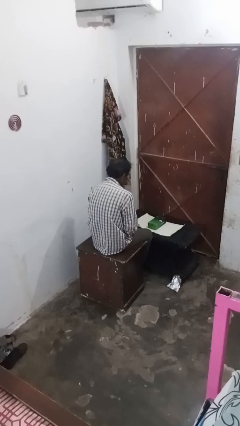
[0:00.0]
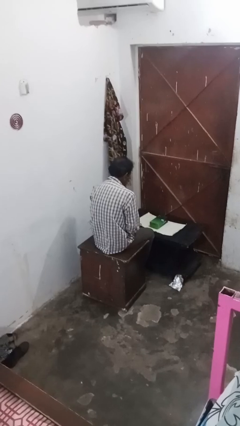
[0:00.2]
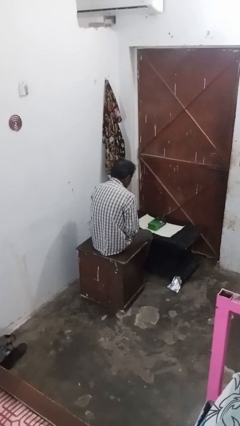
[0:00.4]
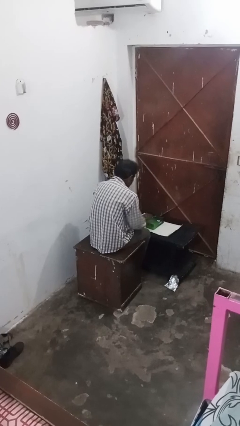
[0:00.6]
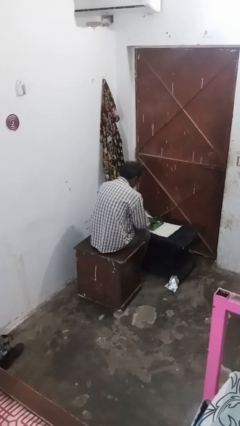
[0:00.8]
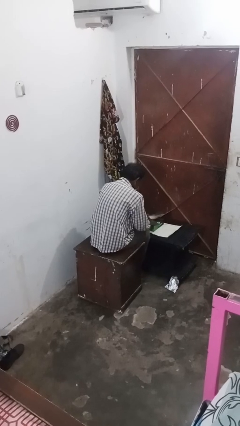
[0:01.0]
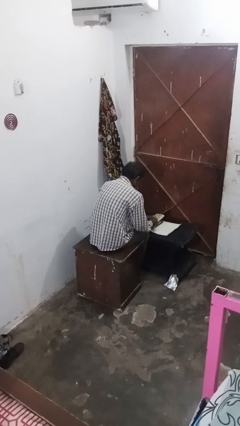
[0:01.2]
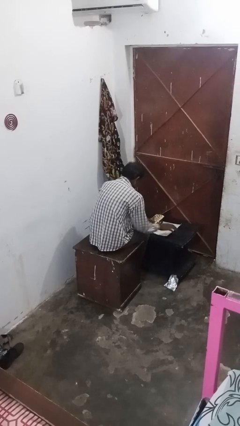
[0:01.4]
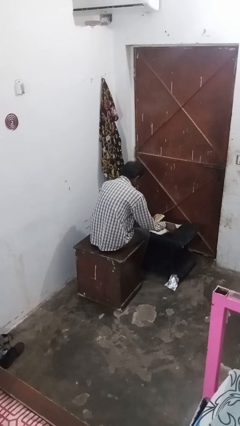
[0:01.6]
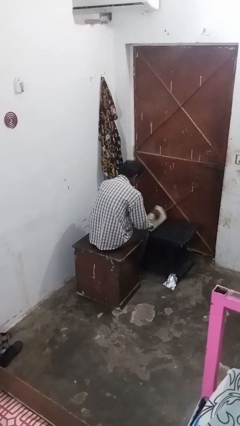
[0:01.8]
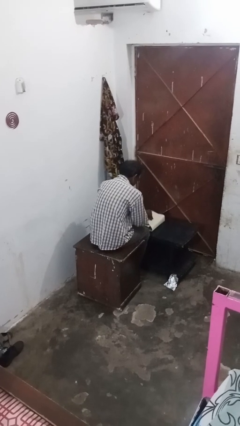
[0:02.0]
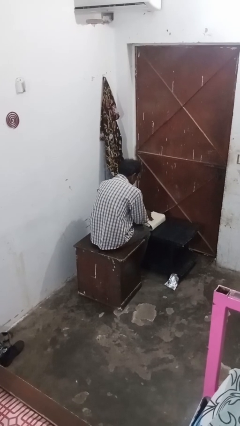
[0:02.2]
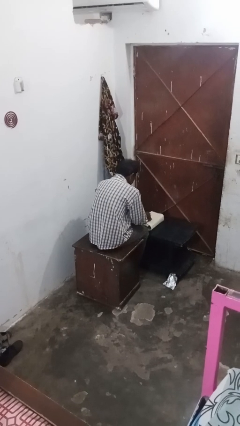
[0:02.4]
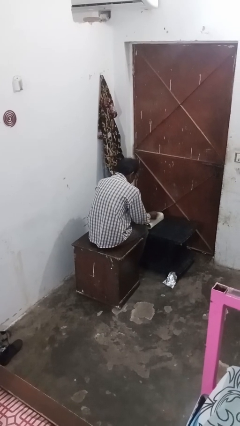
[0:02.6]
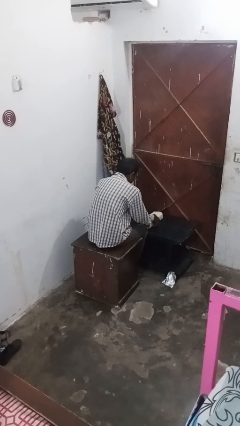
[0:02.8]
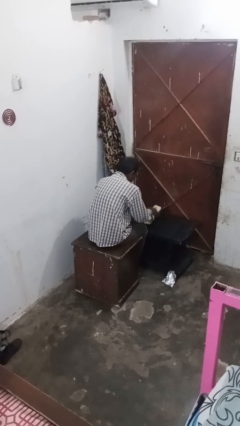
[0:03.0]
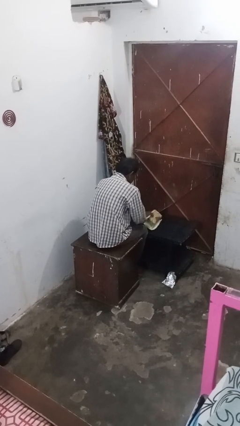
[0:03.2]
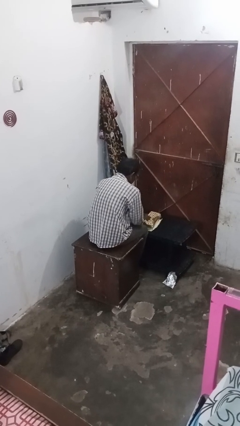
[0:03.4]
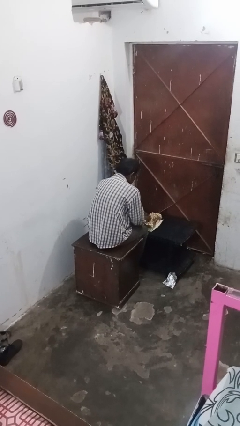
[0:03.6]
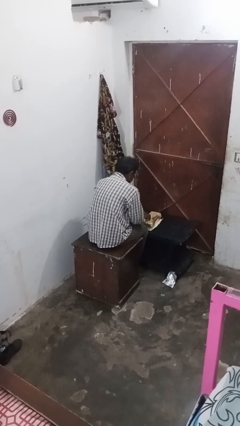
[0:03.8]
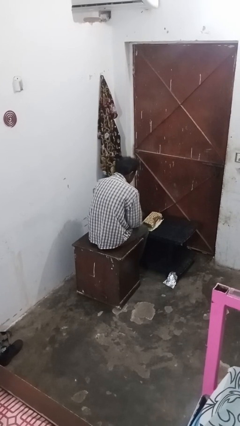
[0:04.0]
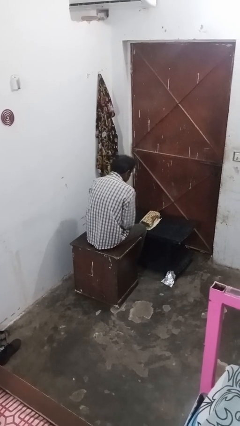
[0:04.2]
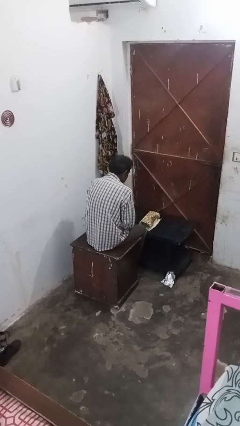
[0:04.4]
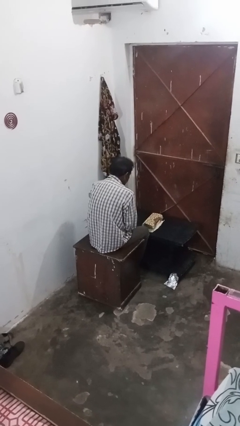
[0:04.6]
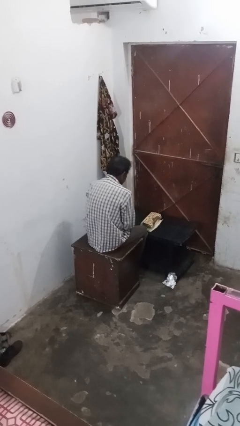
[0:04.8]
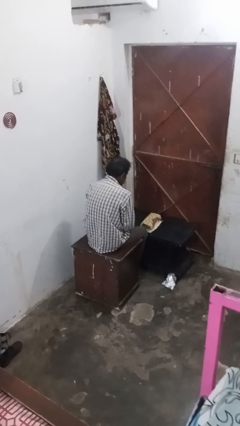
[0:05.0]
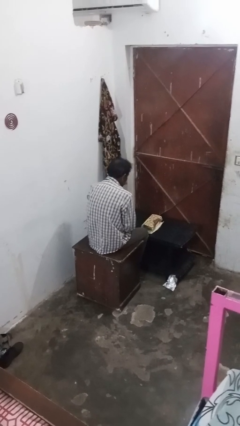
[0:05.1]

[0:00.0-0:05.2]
person wraps box

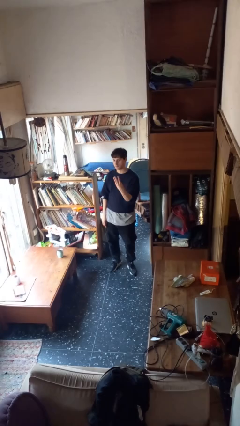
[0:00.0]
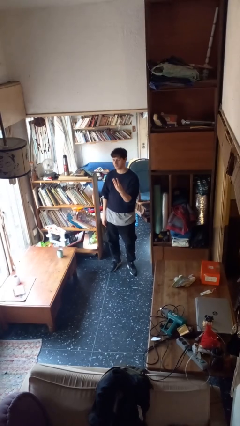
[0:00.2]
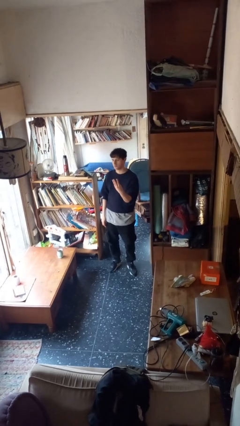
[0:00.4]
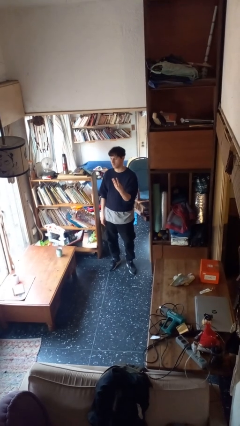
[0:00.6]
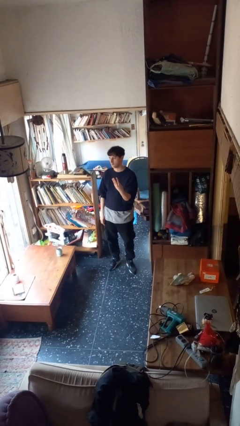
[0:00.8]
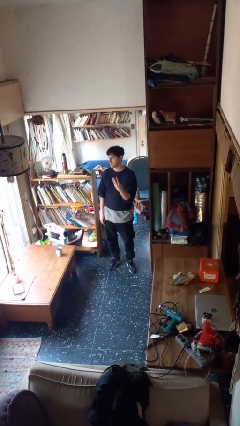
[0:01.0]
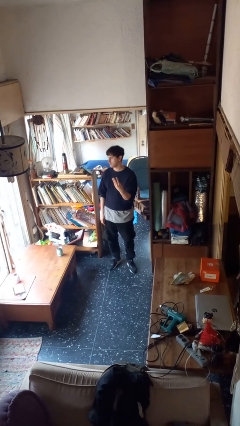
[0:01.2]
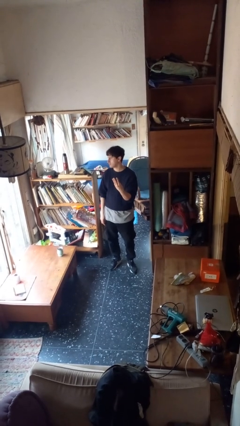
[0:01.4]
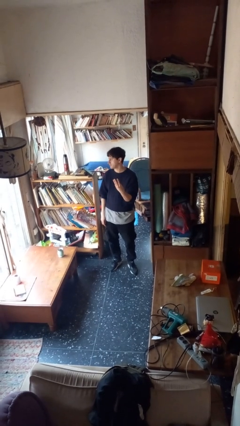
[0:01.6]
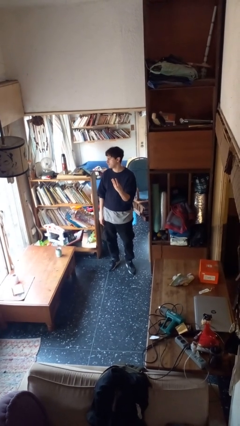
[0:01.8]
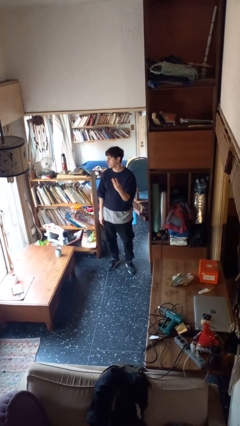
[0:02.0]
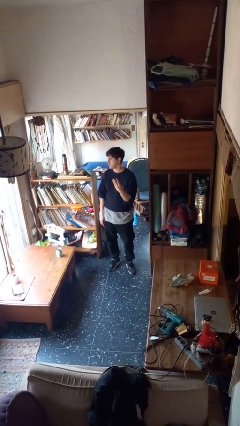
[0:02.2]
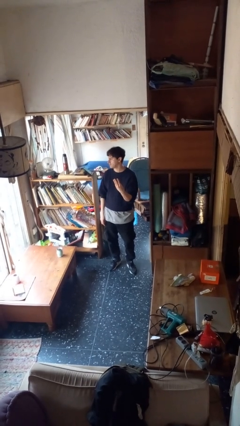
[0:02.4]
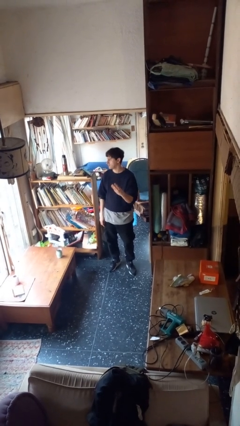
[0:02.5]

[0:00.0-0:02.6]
person gestures number three

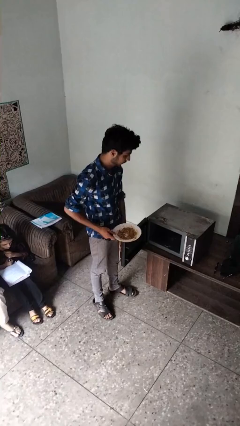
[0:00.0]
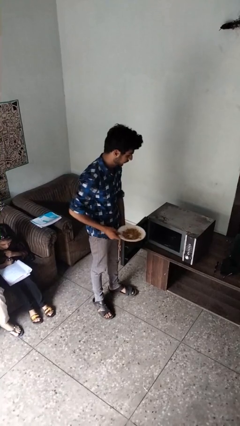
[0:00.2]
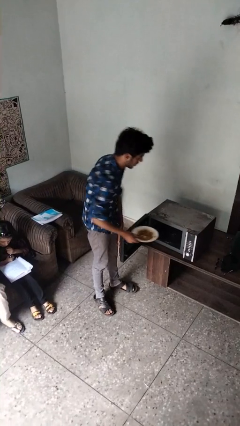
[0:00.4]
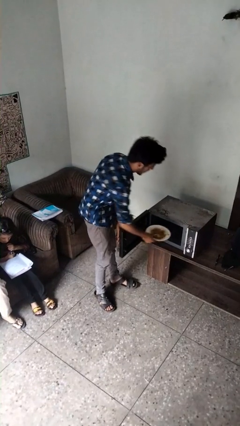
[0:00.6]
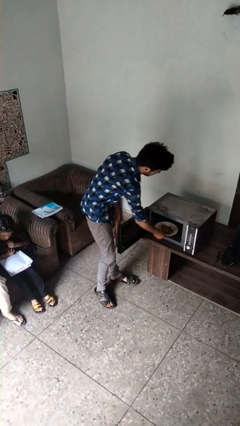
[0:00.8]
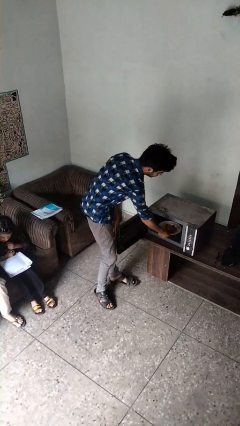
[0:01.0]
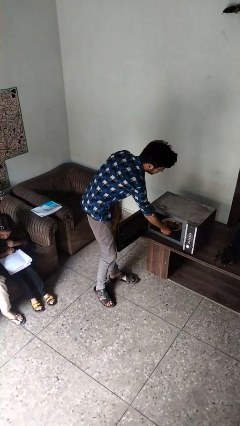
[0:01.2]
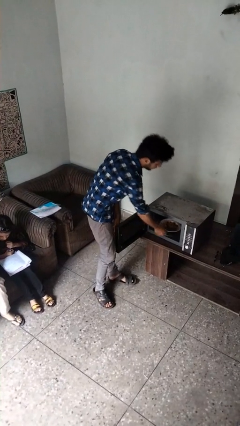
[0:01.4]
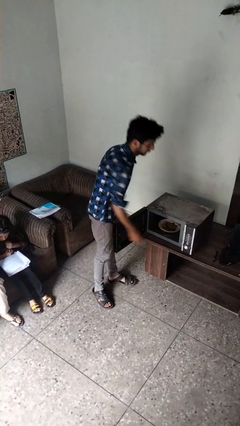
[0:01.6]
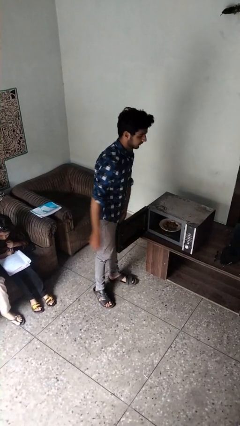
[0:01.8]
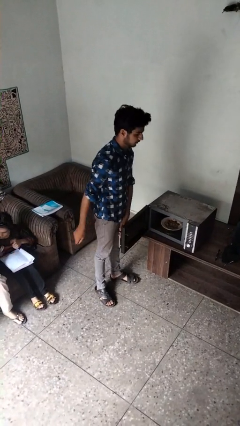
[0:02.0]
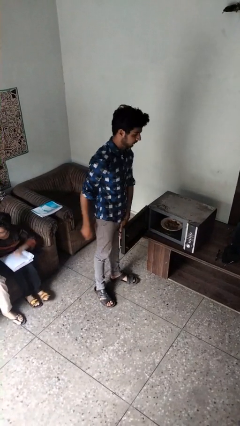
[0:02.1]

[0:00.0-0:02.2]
person puts object into microwave

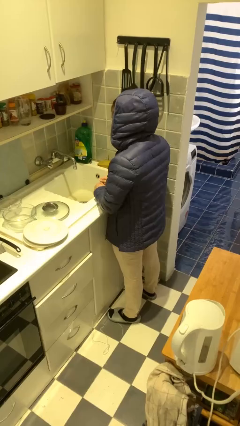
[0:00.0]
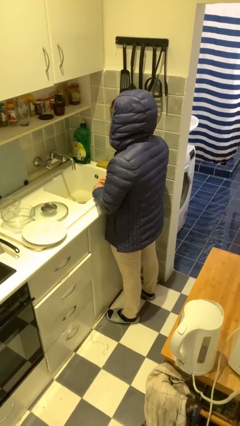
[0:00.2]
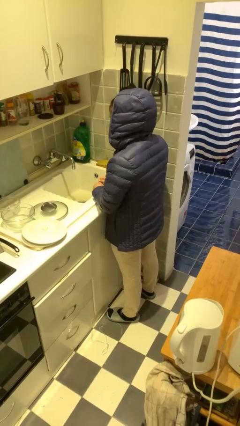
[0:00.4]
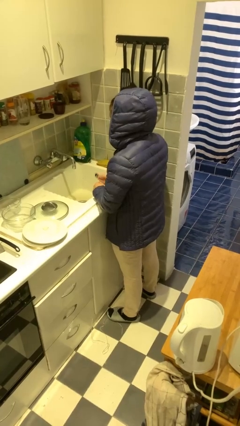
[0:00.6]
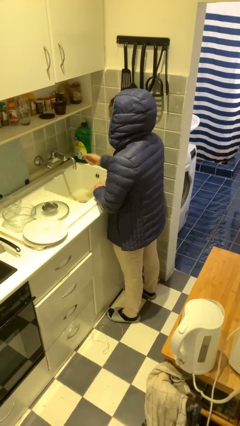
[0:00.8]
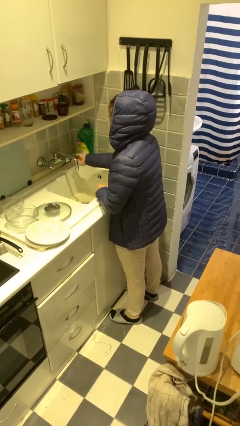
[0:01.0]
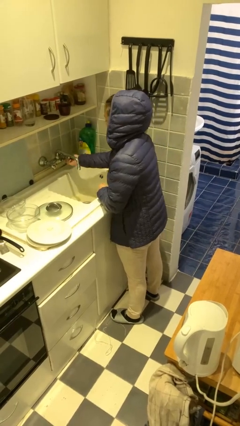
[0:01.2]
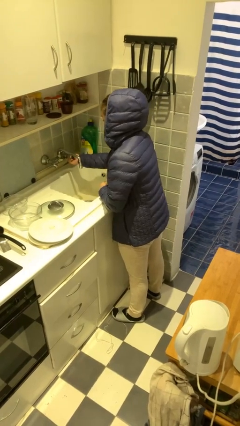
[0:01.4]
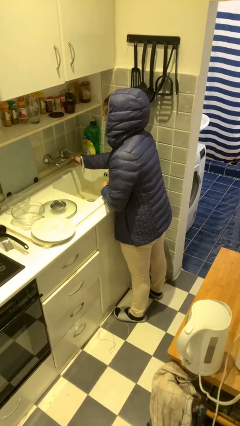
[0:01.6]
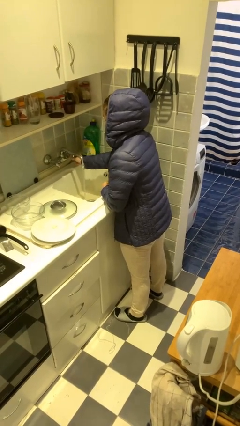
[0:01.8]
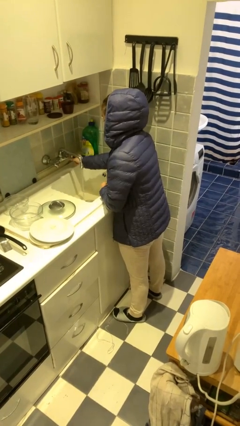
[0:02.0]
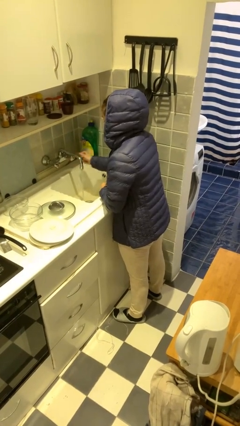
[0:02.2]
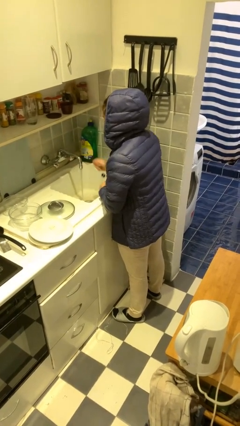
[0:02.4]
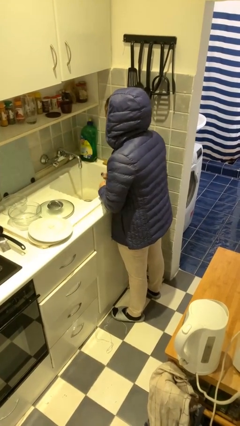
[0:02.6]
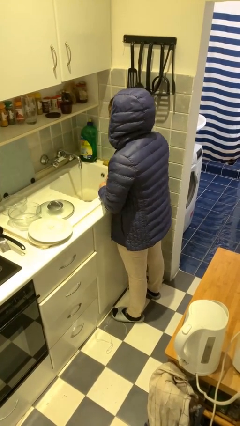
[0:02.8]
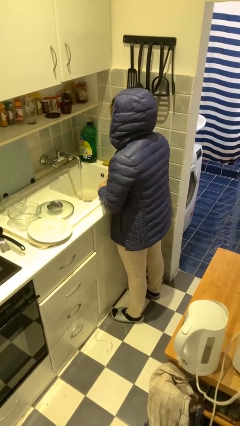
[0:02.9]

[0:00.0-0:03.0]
person turns on faucet

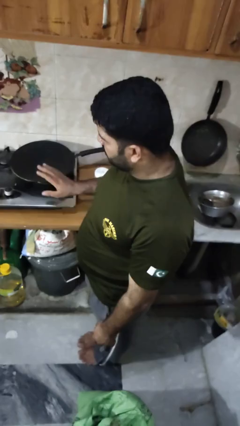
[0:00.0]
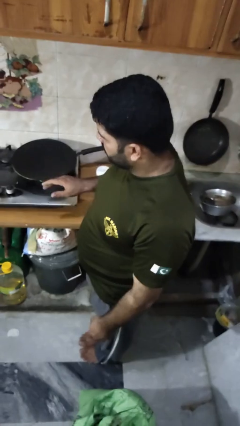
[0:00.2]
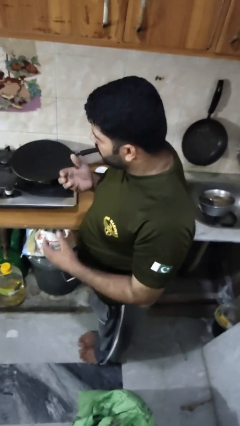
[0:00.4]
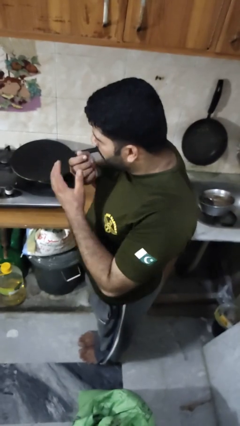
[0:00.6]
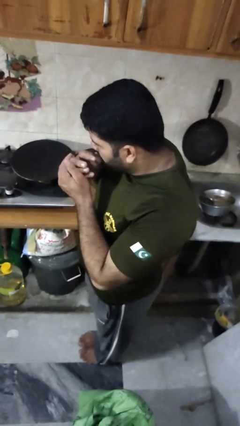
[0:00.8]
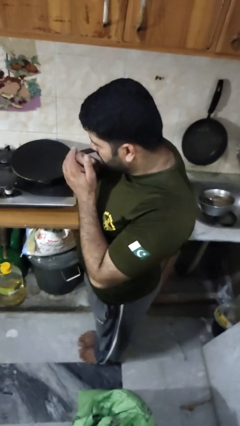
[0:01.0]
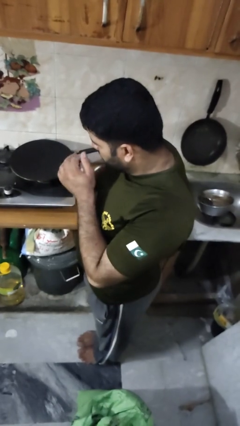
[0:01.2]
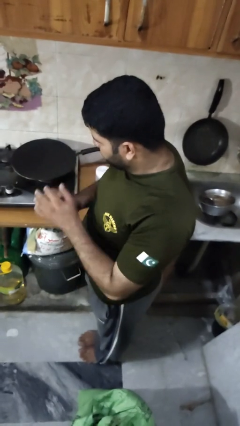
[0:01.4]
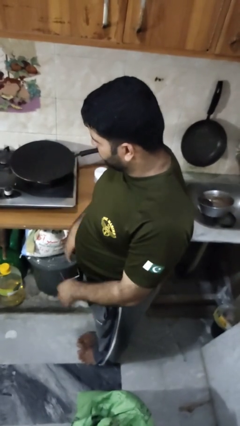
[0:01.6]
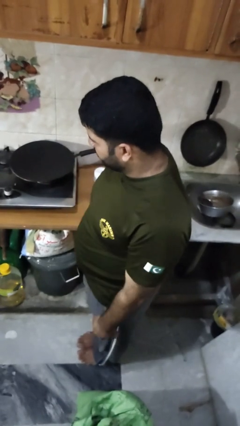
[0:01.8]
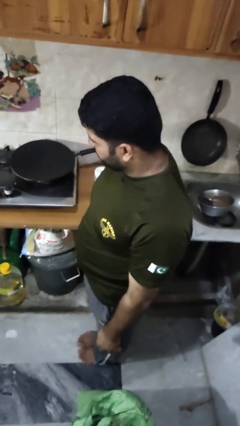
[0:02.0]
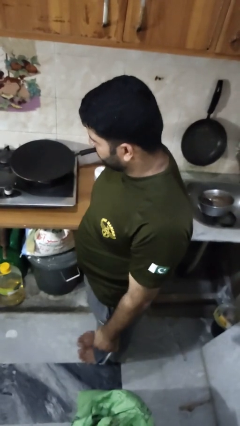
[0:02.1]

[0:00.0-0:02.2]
person burns hand

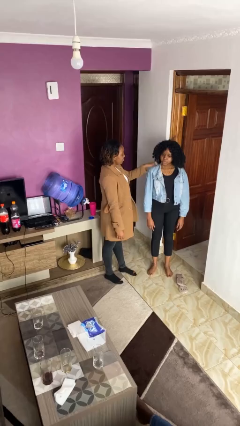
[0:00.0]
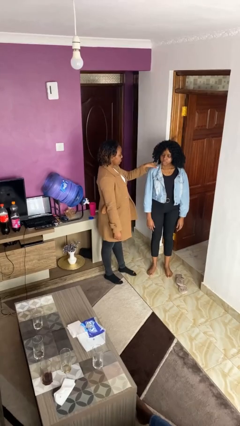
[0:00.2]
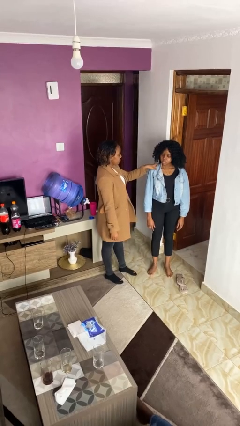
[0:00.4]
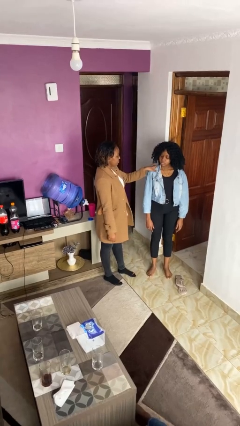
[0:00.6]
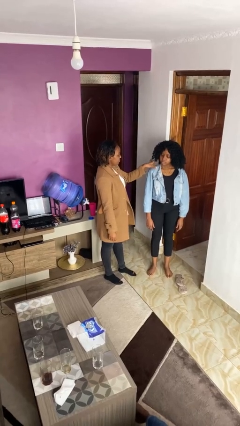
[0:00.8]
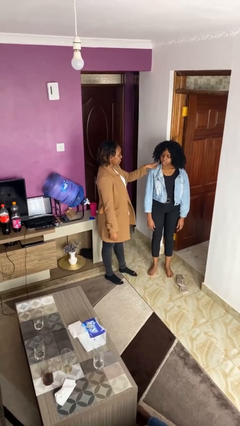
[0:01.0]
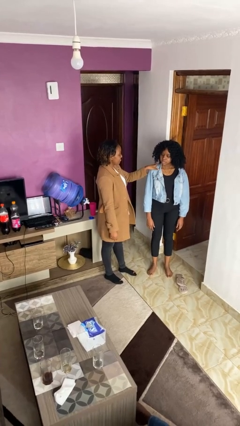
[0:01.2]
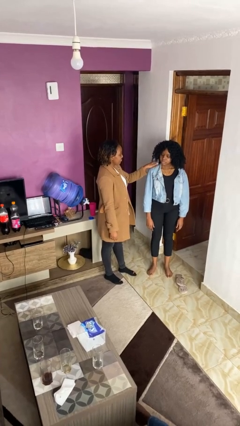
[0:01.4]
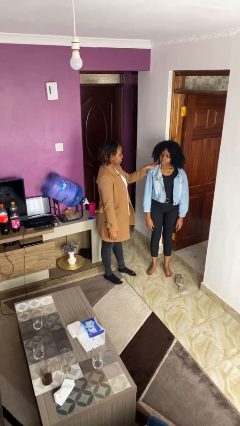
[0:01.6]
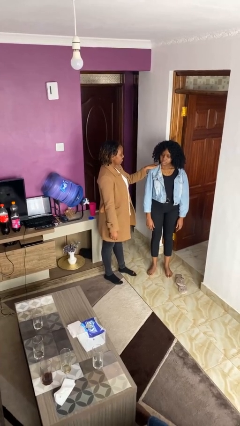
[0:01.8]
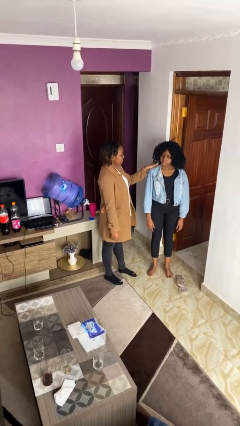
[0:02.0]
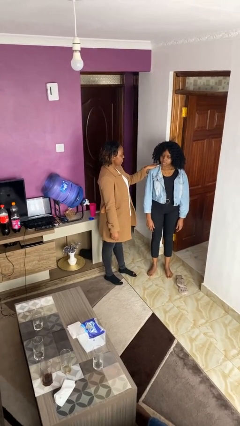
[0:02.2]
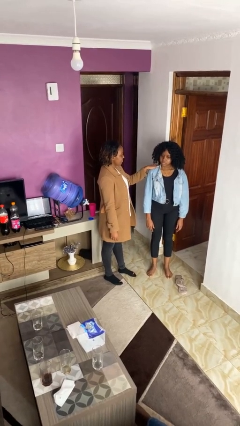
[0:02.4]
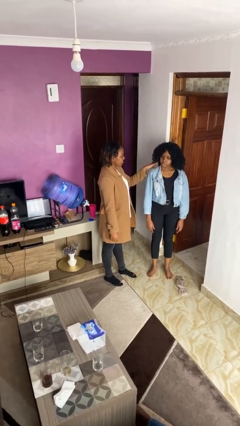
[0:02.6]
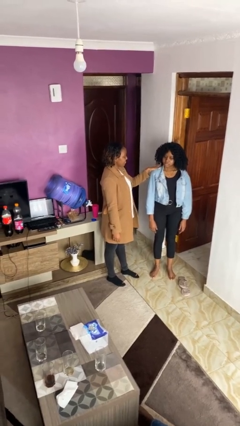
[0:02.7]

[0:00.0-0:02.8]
person pounds shoulders of person
